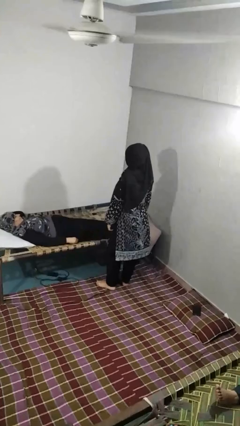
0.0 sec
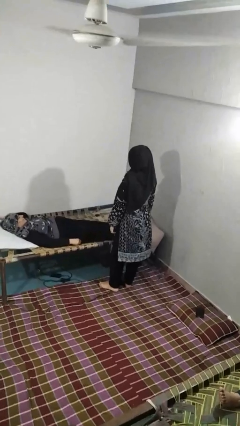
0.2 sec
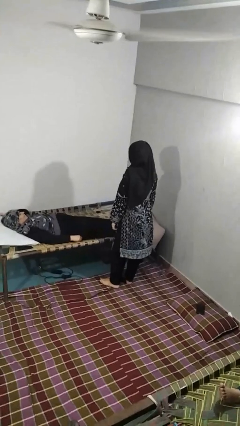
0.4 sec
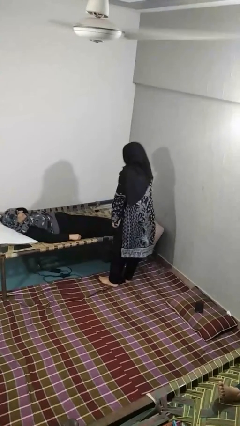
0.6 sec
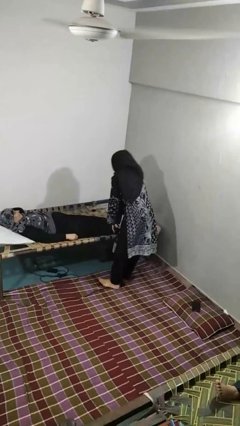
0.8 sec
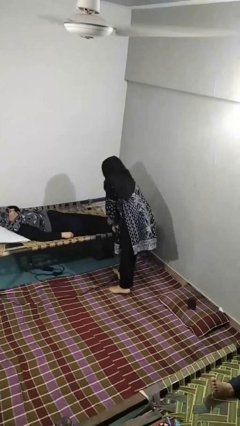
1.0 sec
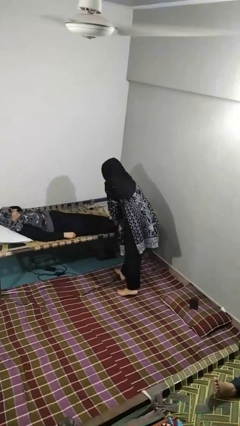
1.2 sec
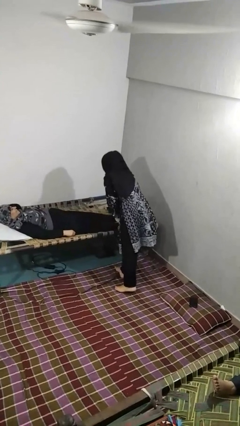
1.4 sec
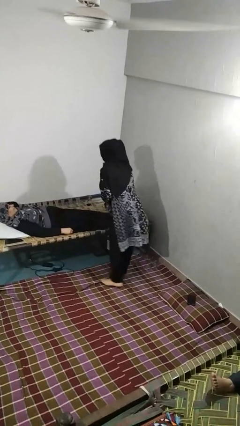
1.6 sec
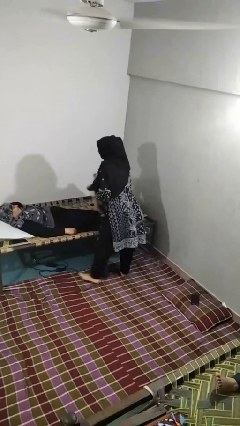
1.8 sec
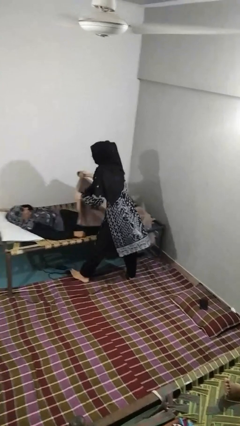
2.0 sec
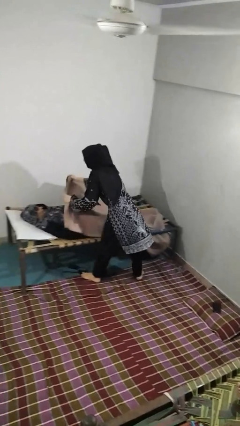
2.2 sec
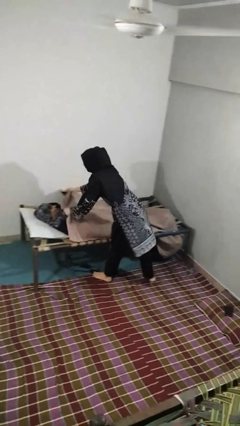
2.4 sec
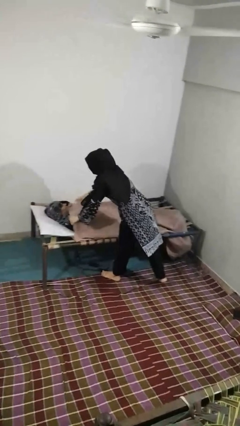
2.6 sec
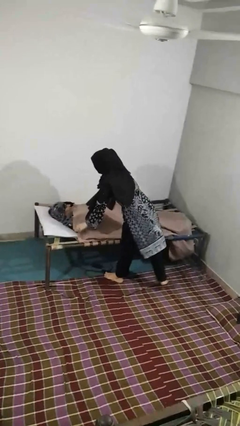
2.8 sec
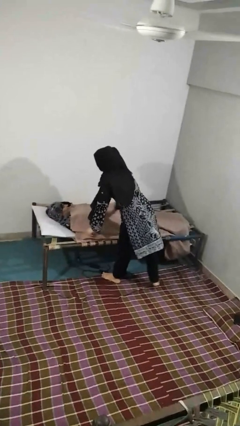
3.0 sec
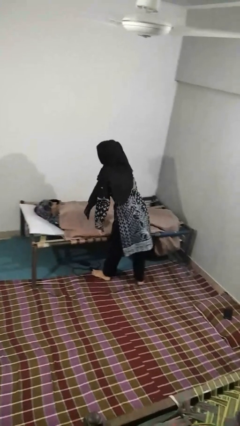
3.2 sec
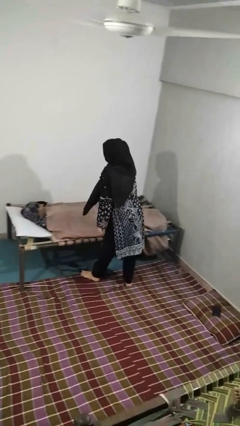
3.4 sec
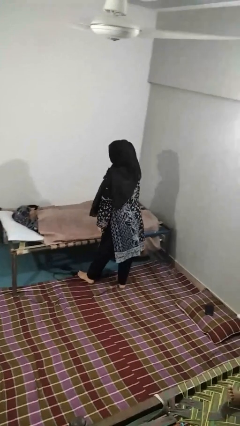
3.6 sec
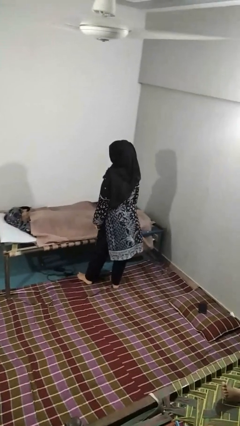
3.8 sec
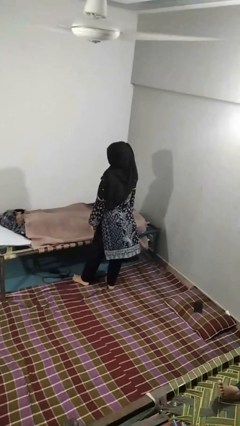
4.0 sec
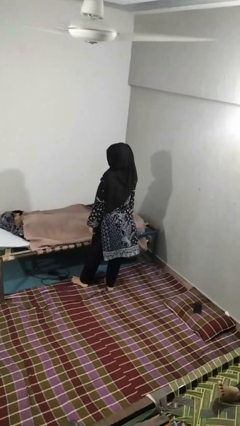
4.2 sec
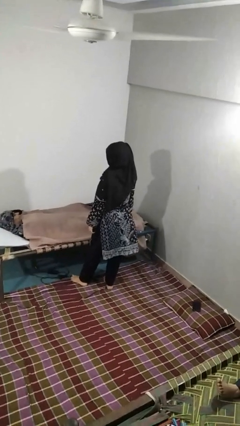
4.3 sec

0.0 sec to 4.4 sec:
person covers friend with blanket

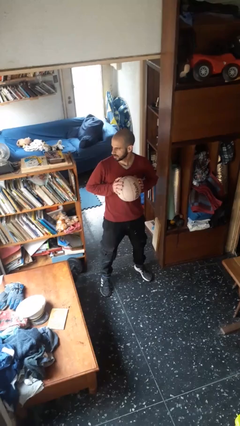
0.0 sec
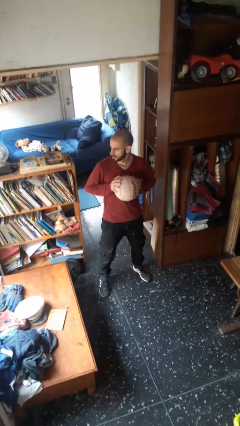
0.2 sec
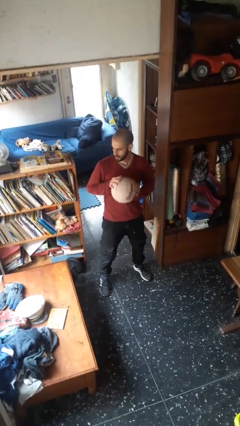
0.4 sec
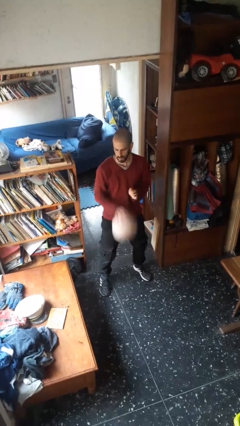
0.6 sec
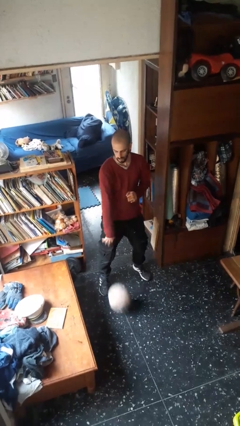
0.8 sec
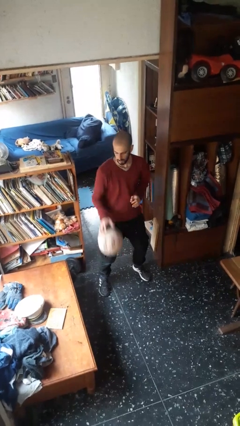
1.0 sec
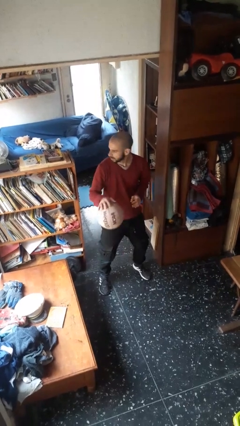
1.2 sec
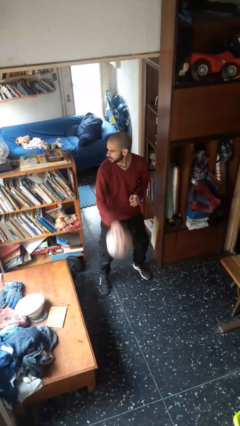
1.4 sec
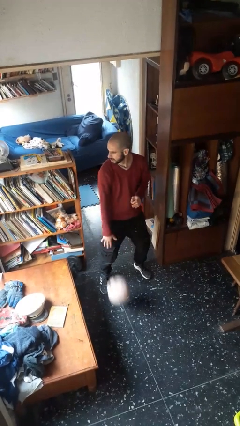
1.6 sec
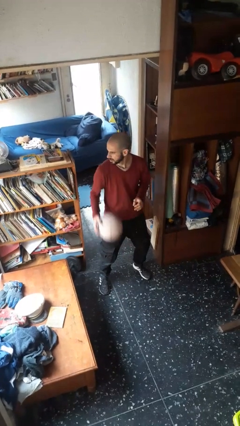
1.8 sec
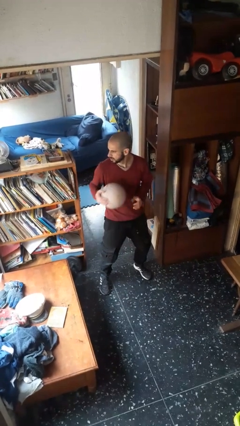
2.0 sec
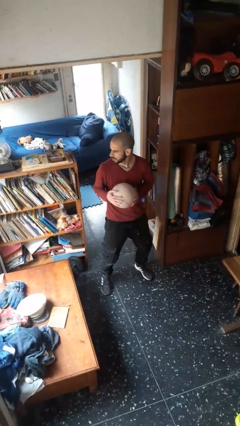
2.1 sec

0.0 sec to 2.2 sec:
person bounces ball on floor

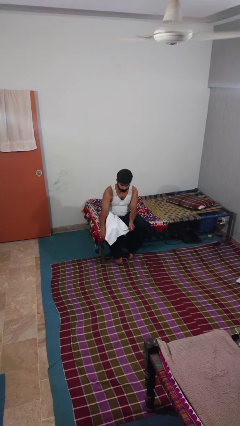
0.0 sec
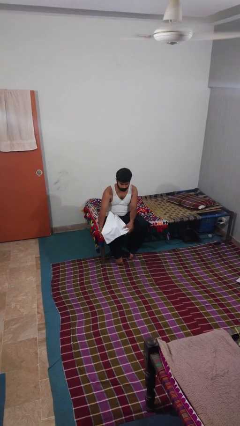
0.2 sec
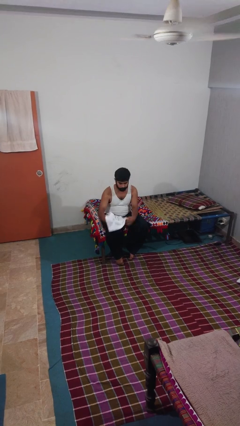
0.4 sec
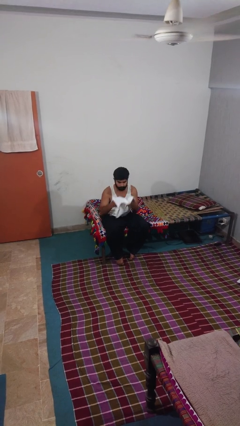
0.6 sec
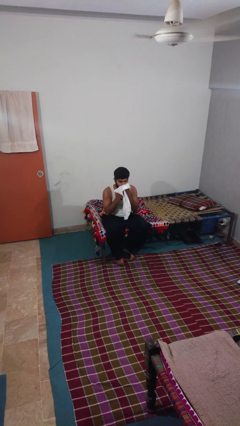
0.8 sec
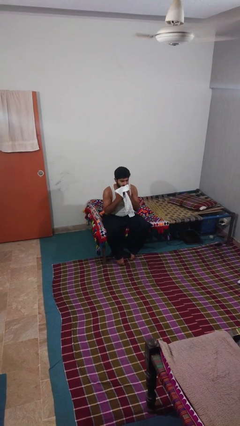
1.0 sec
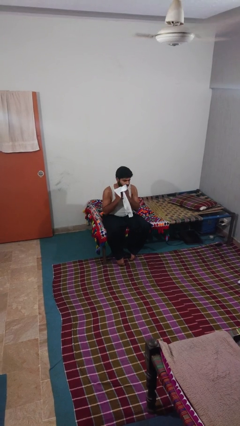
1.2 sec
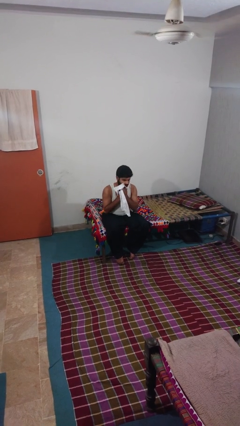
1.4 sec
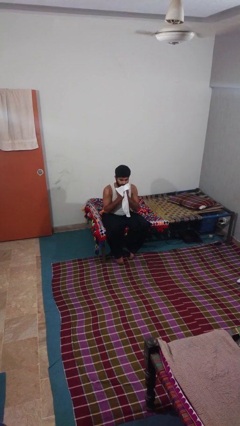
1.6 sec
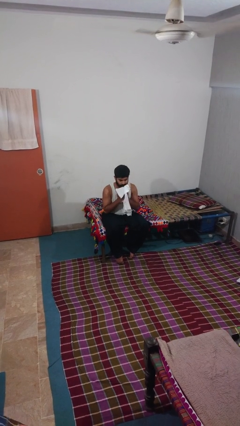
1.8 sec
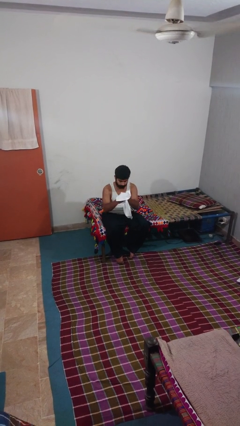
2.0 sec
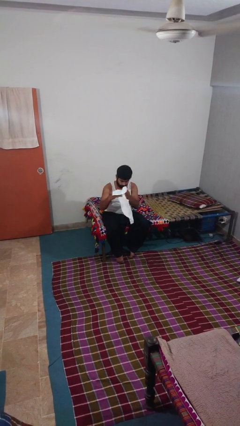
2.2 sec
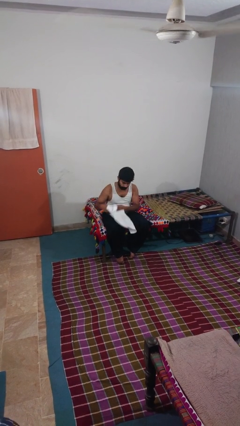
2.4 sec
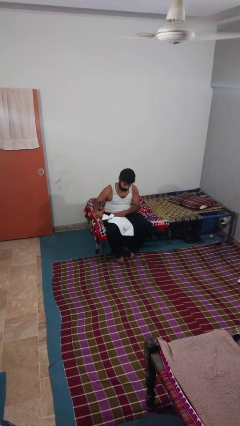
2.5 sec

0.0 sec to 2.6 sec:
person wipes mouth with napkin

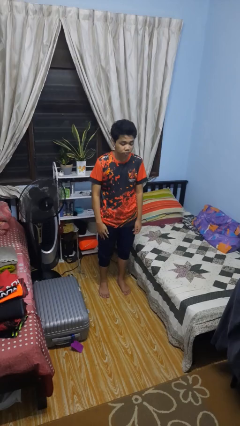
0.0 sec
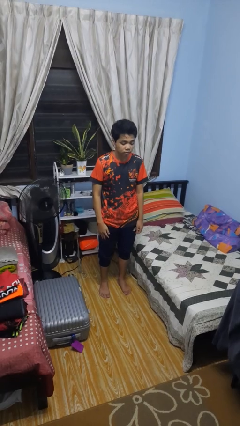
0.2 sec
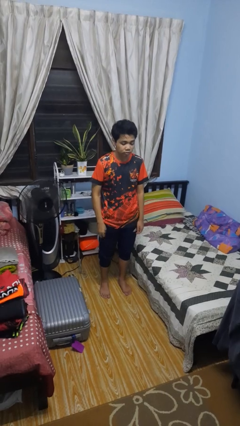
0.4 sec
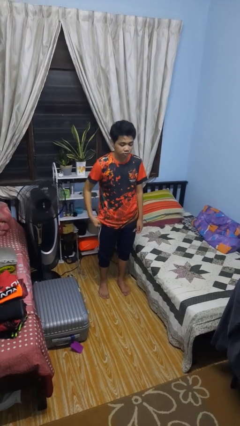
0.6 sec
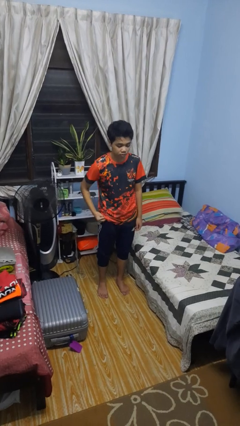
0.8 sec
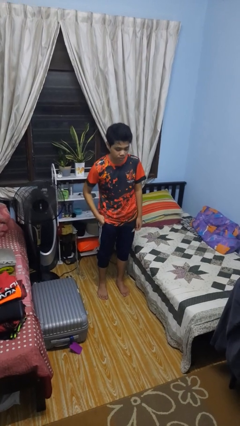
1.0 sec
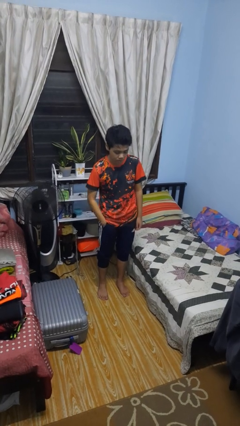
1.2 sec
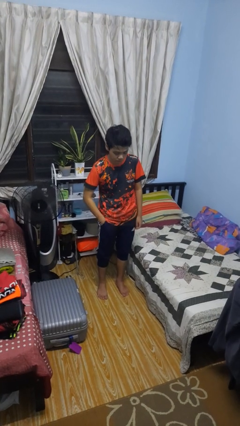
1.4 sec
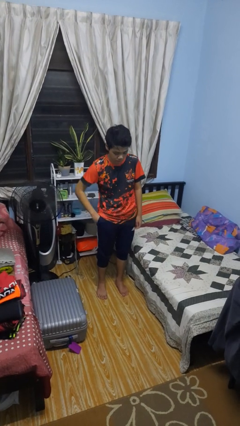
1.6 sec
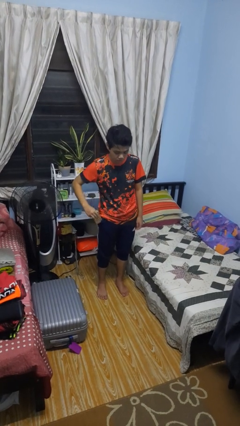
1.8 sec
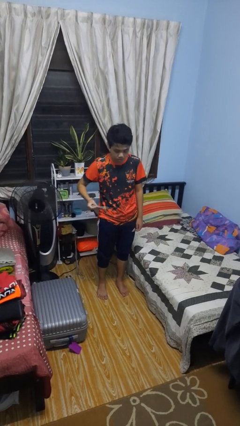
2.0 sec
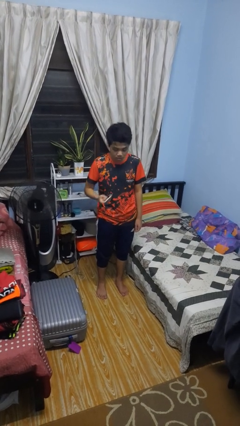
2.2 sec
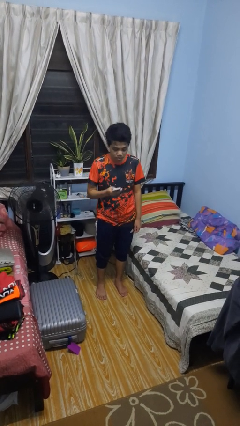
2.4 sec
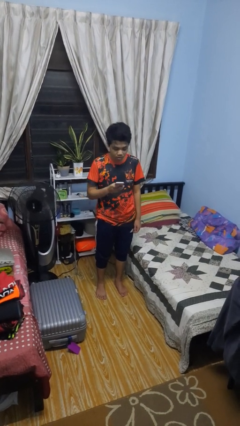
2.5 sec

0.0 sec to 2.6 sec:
person takes phone from pocket

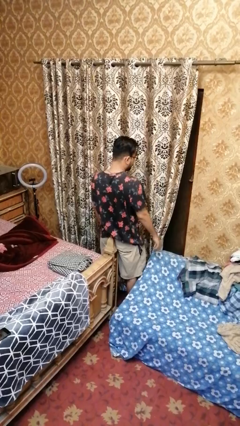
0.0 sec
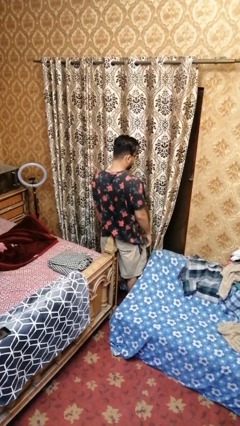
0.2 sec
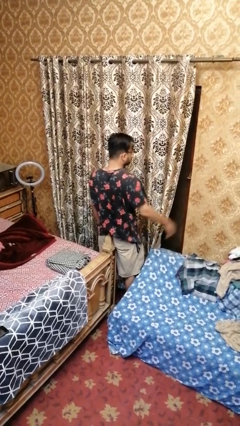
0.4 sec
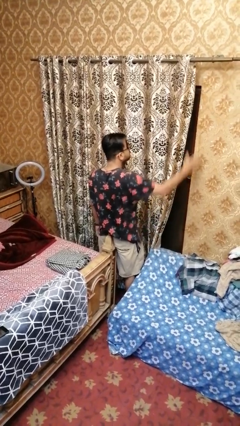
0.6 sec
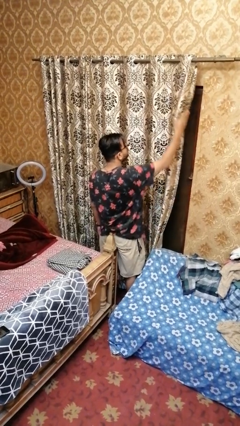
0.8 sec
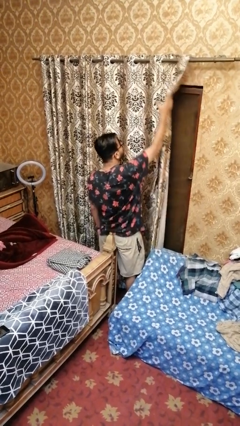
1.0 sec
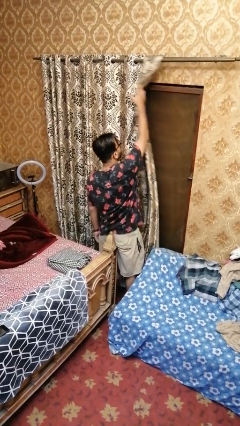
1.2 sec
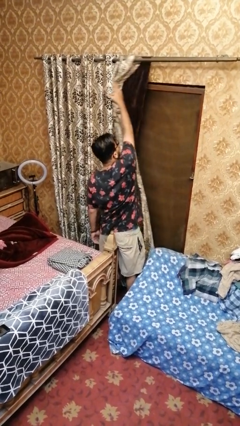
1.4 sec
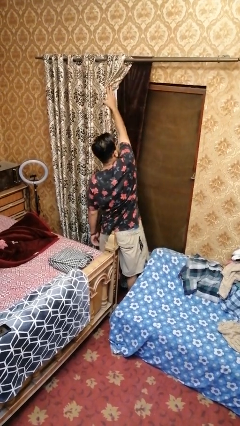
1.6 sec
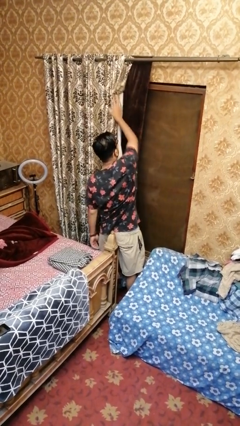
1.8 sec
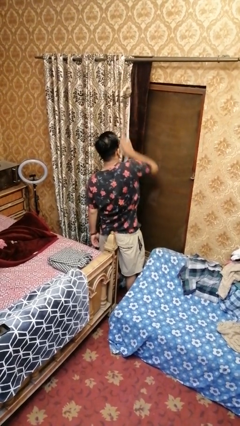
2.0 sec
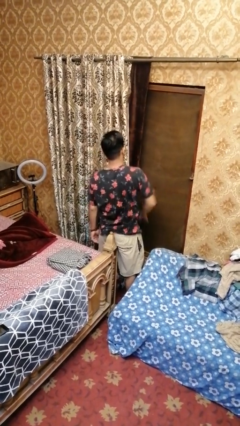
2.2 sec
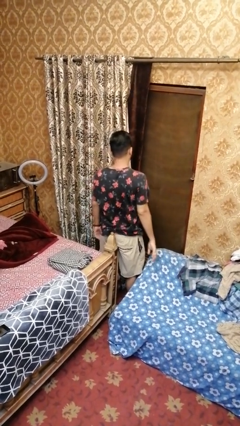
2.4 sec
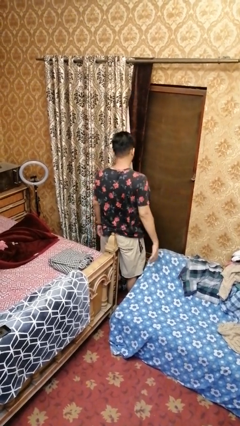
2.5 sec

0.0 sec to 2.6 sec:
person opens curtains

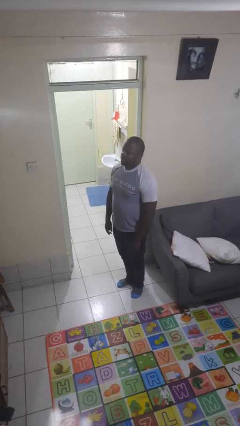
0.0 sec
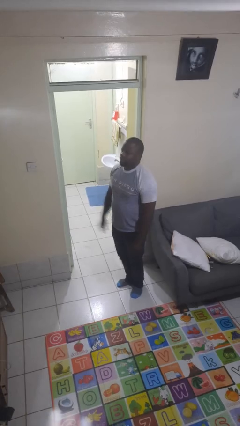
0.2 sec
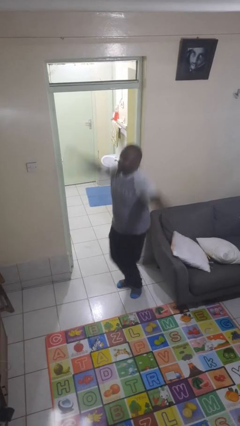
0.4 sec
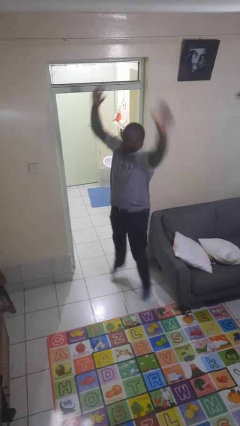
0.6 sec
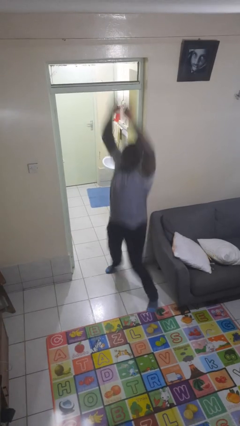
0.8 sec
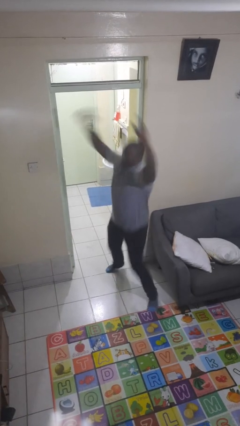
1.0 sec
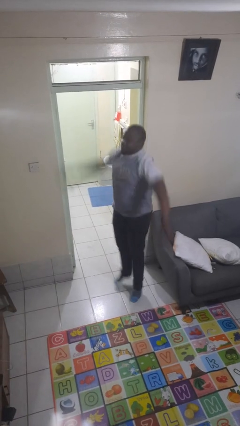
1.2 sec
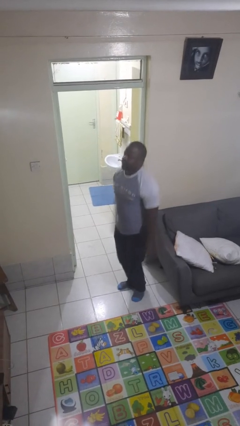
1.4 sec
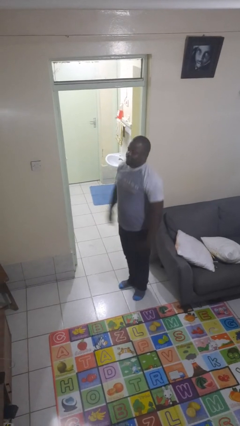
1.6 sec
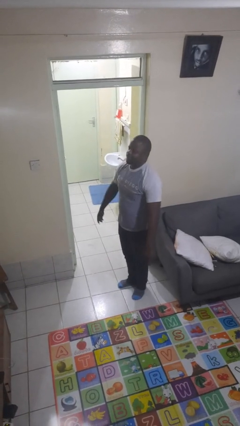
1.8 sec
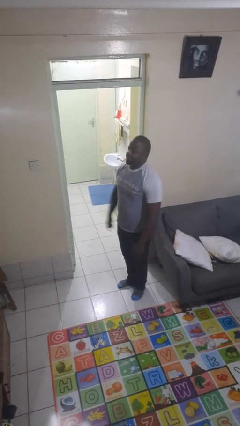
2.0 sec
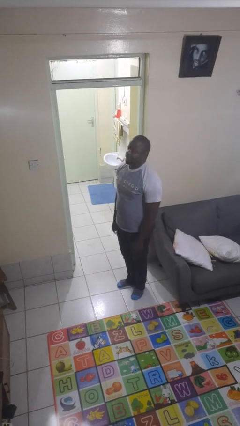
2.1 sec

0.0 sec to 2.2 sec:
person exercises with jumping jacks

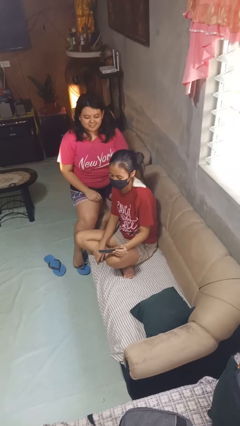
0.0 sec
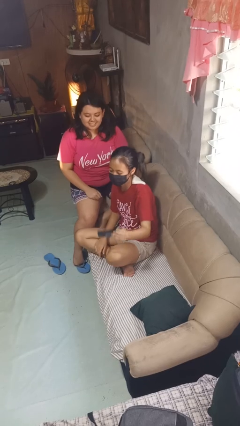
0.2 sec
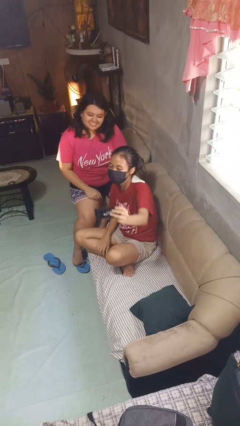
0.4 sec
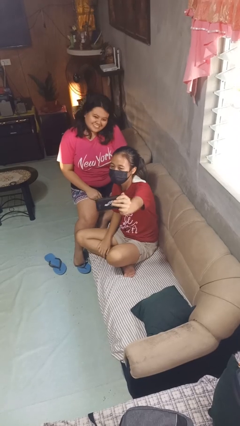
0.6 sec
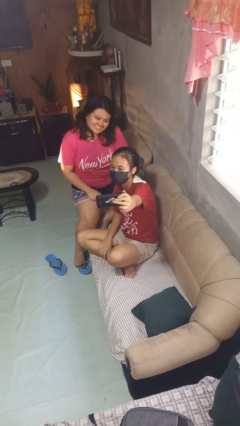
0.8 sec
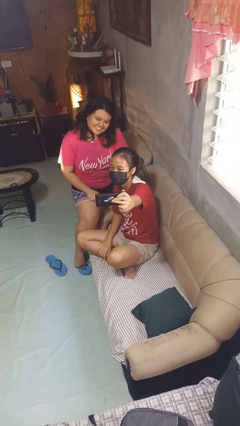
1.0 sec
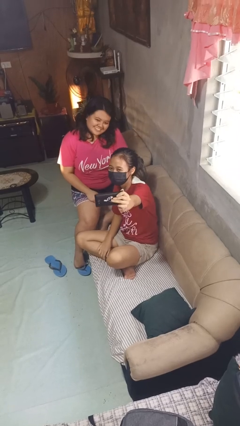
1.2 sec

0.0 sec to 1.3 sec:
person takes selfie with person
